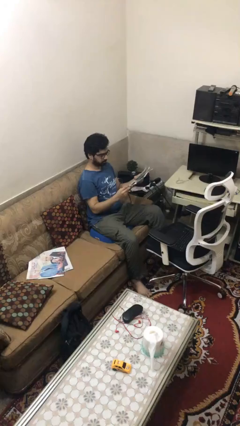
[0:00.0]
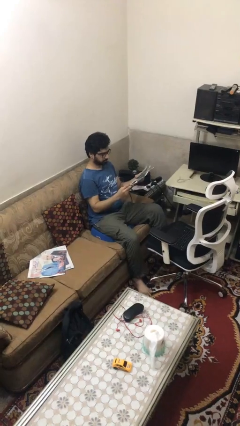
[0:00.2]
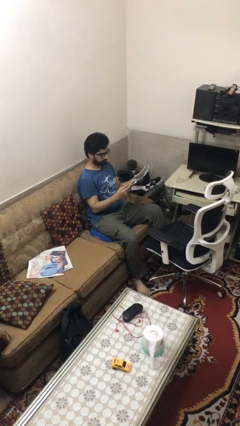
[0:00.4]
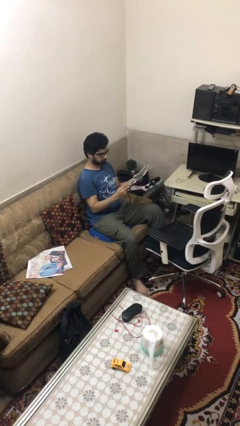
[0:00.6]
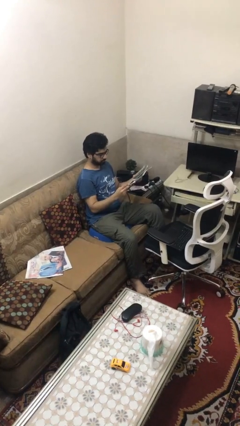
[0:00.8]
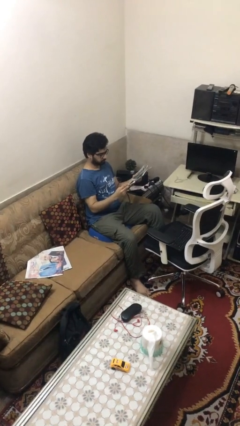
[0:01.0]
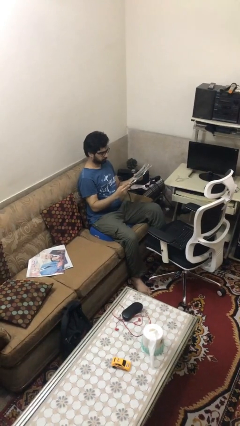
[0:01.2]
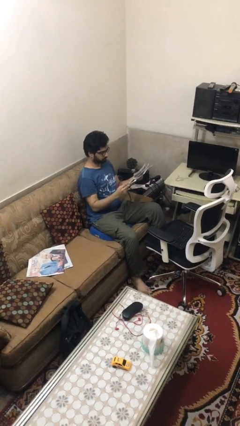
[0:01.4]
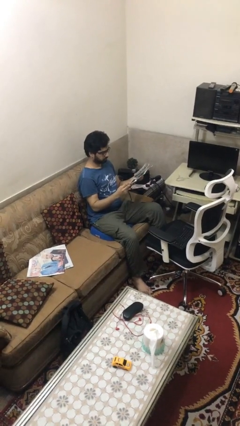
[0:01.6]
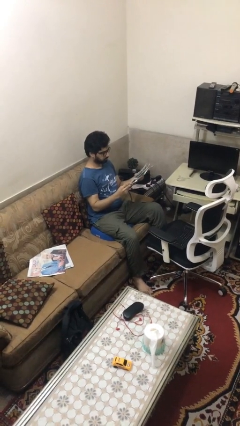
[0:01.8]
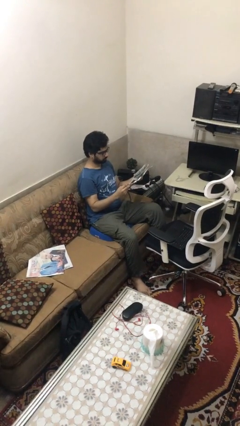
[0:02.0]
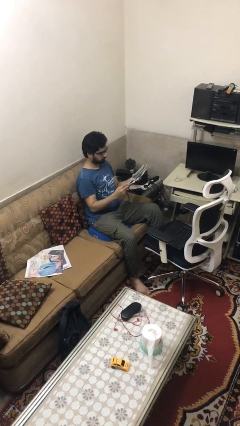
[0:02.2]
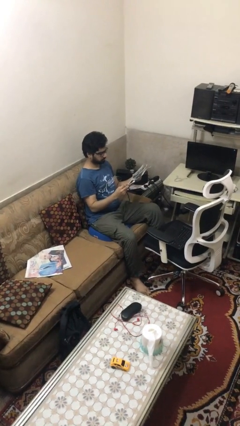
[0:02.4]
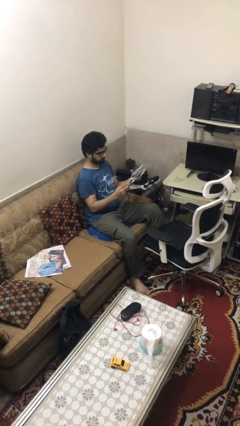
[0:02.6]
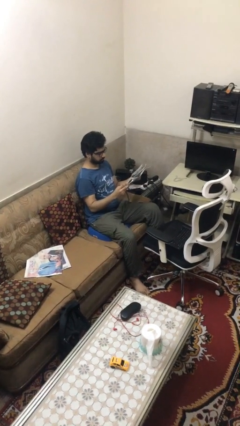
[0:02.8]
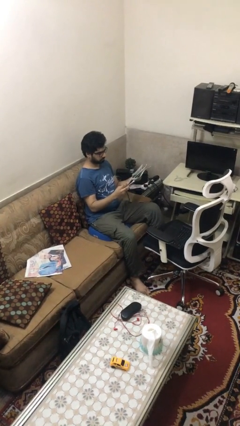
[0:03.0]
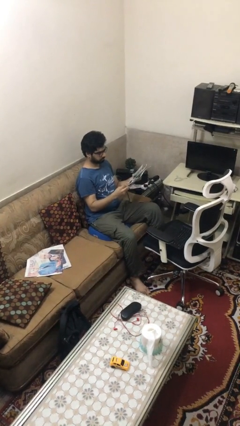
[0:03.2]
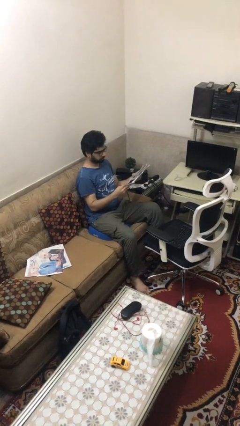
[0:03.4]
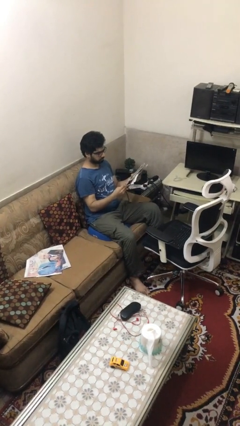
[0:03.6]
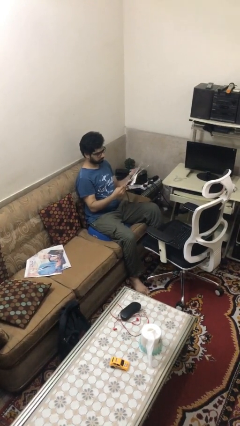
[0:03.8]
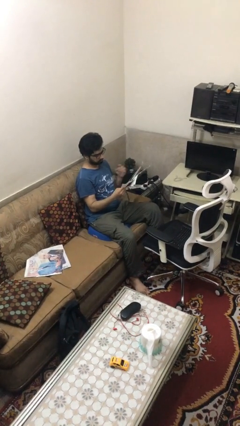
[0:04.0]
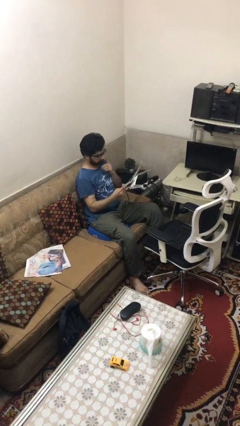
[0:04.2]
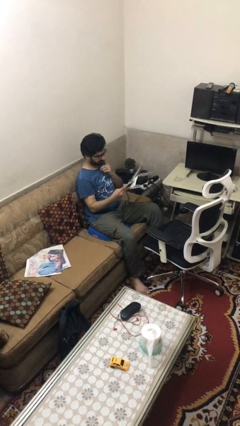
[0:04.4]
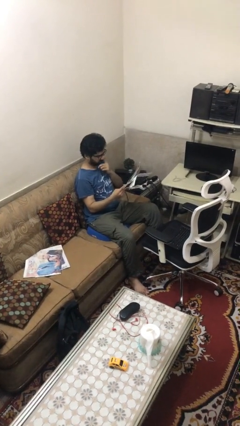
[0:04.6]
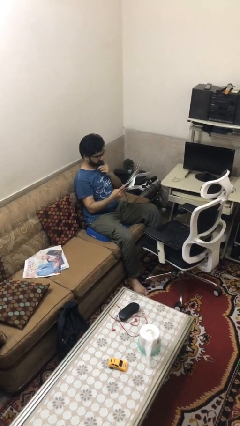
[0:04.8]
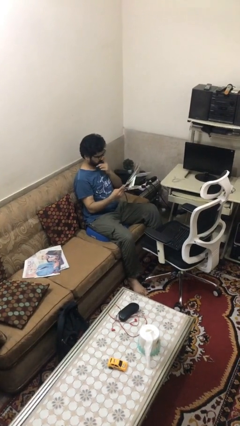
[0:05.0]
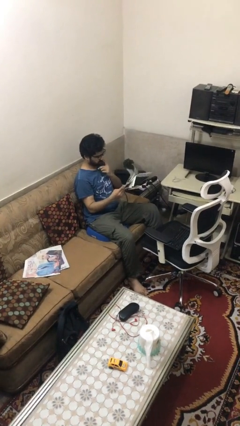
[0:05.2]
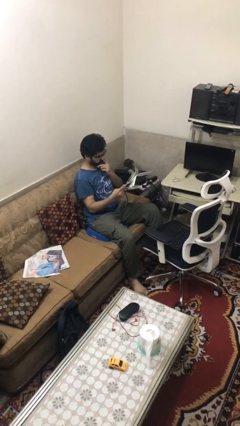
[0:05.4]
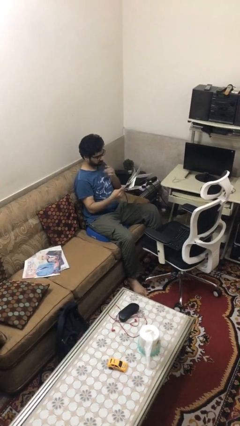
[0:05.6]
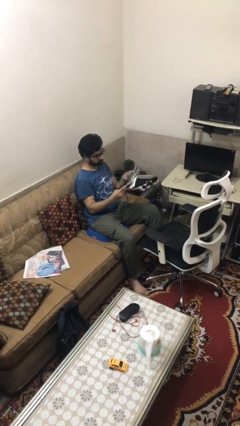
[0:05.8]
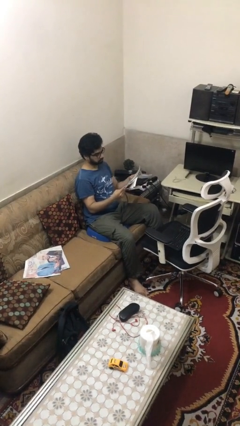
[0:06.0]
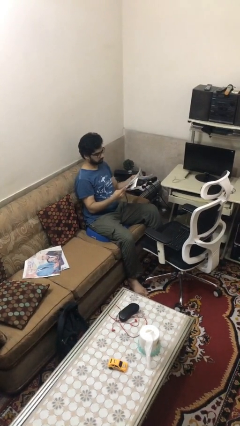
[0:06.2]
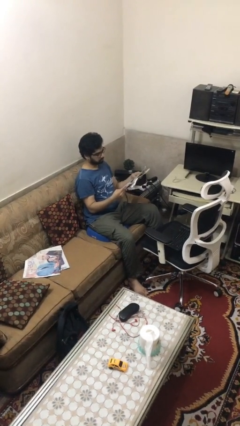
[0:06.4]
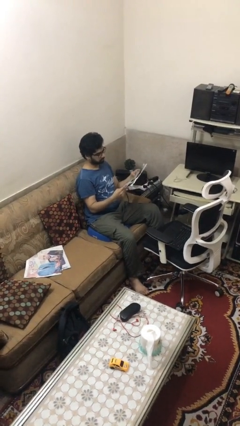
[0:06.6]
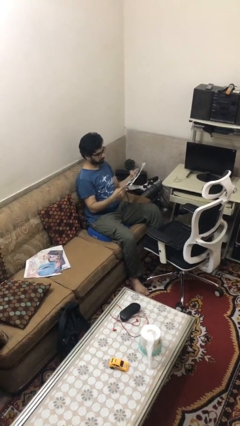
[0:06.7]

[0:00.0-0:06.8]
person reads document

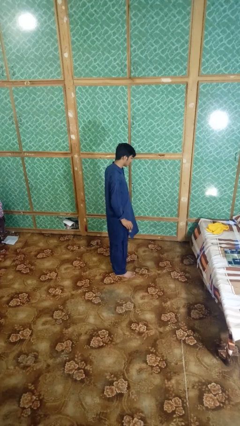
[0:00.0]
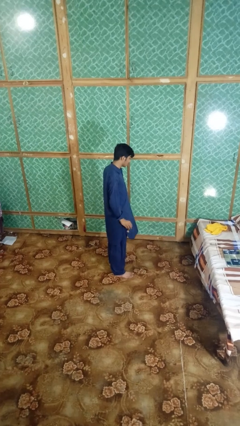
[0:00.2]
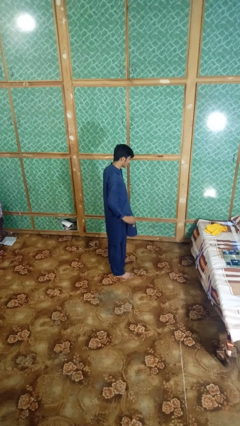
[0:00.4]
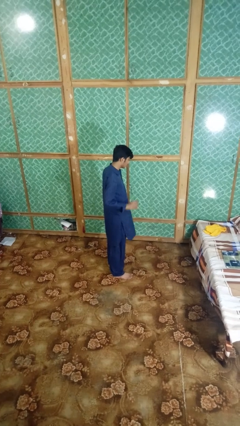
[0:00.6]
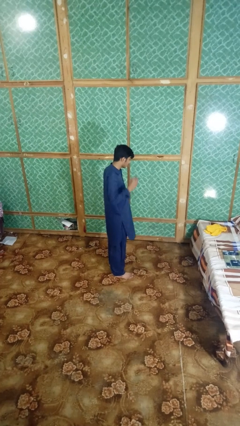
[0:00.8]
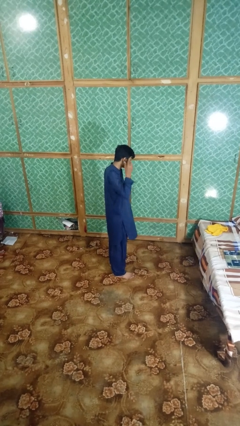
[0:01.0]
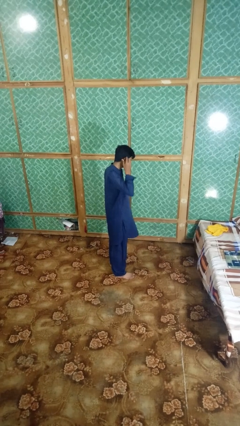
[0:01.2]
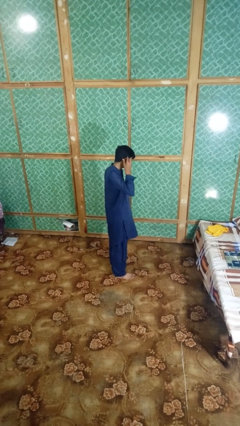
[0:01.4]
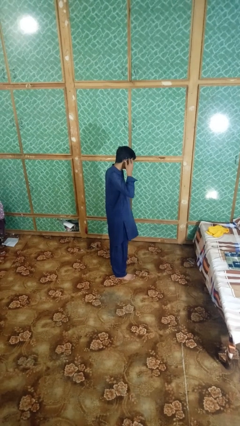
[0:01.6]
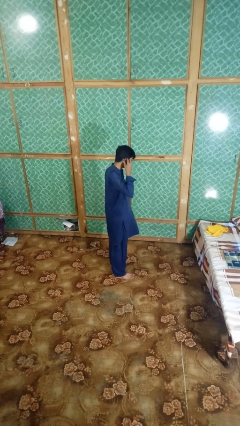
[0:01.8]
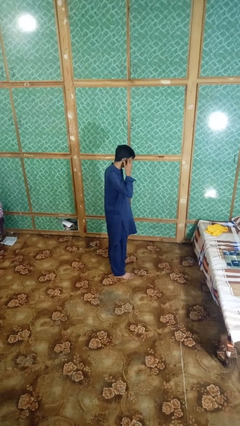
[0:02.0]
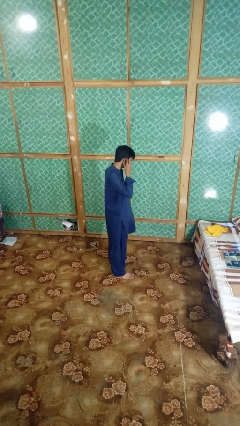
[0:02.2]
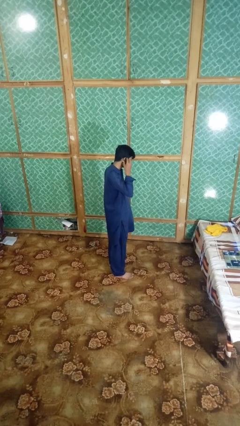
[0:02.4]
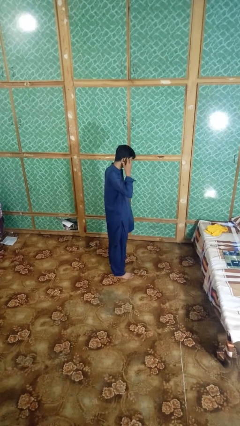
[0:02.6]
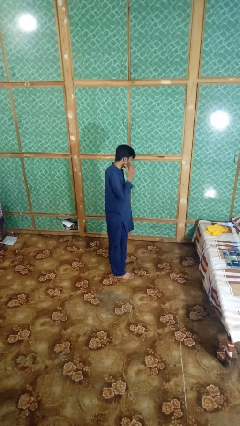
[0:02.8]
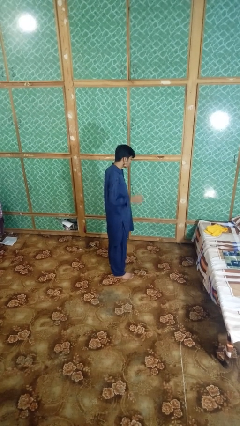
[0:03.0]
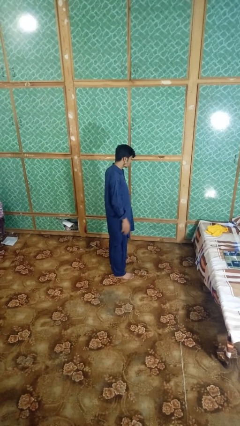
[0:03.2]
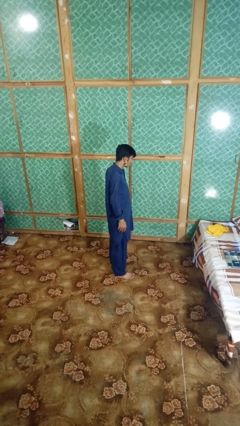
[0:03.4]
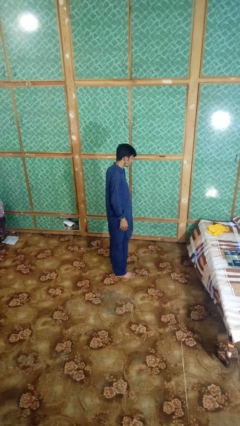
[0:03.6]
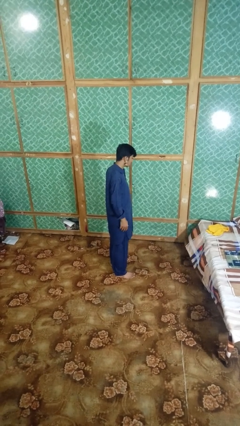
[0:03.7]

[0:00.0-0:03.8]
person puts on earrings

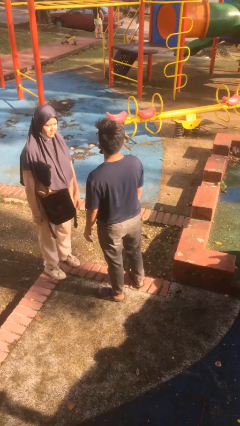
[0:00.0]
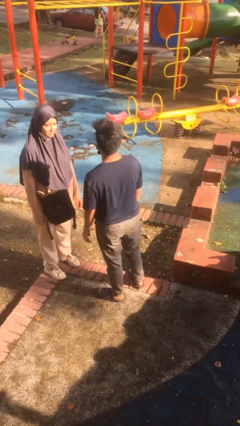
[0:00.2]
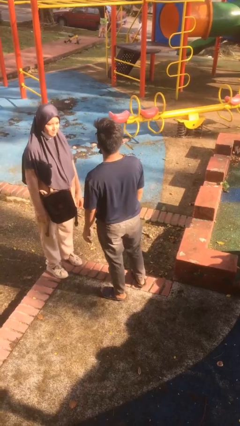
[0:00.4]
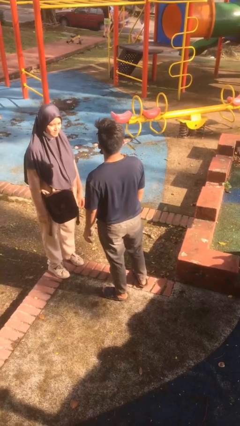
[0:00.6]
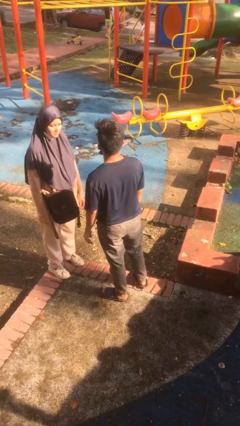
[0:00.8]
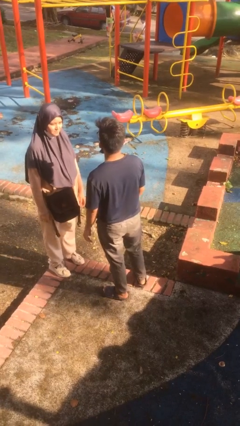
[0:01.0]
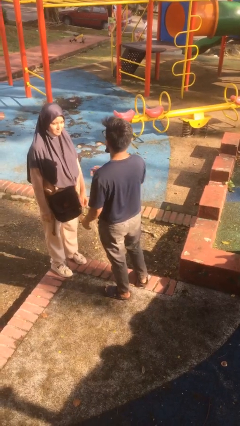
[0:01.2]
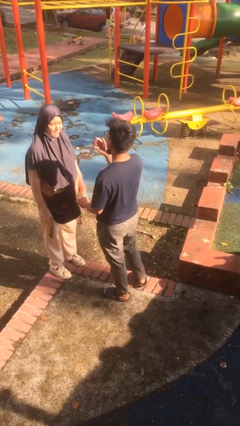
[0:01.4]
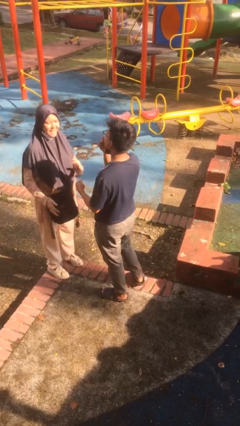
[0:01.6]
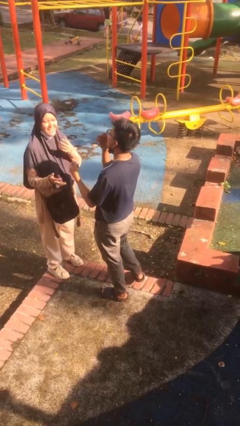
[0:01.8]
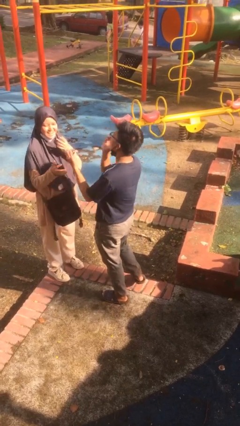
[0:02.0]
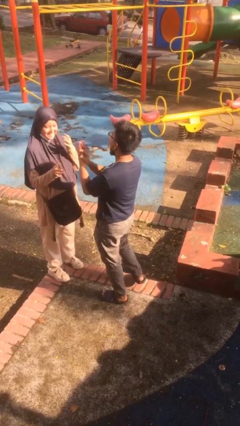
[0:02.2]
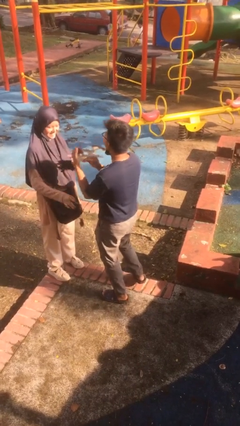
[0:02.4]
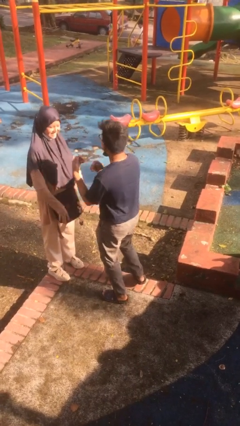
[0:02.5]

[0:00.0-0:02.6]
person laughs with person

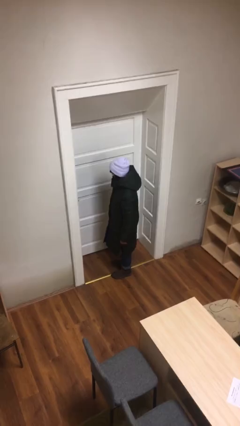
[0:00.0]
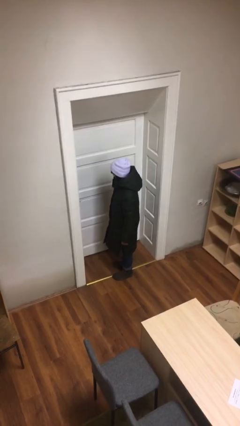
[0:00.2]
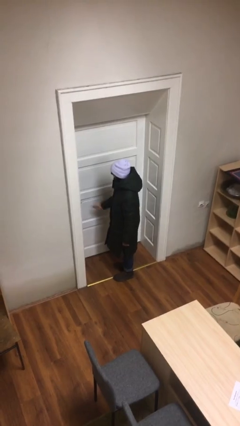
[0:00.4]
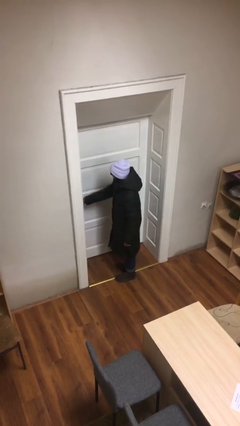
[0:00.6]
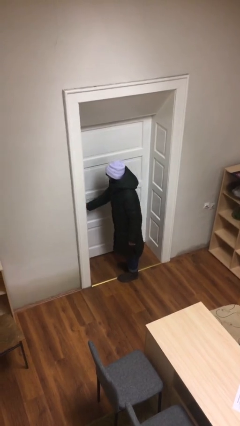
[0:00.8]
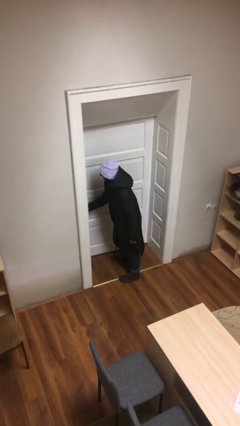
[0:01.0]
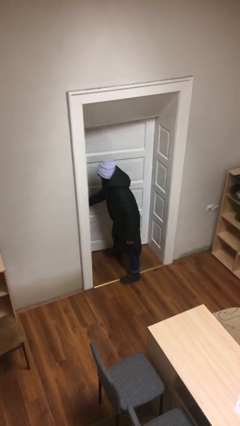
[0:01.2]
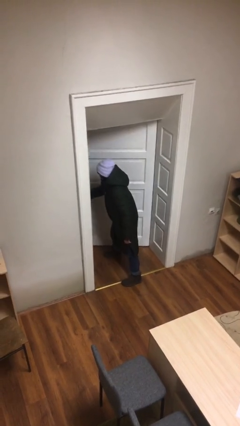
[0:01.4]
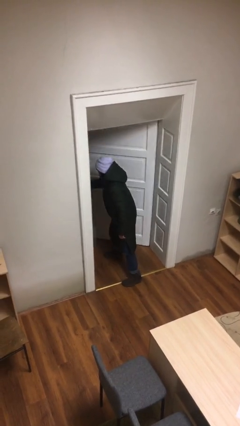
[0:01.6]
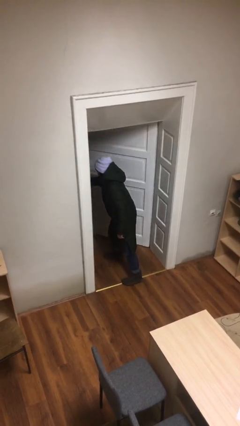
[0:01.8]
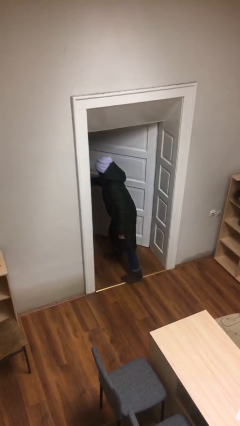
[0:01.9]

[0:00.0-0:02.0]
person opens facility door

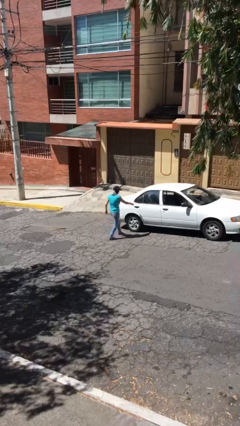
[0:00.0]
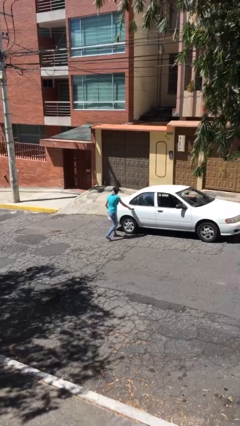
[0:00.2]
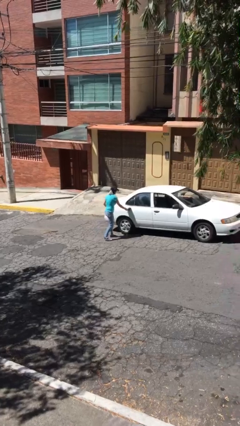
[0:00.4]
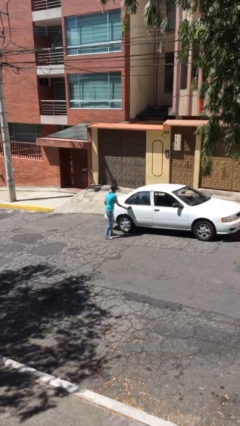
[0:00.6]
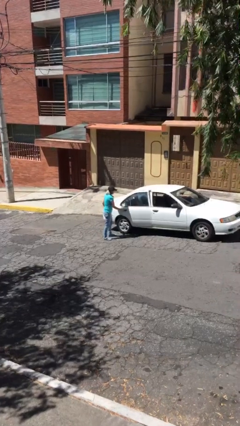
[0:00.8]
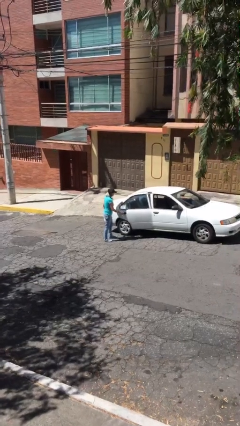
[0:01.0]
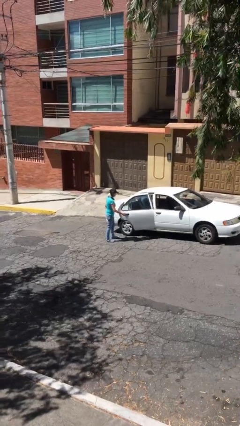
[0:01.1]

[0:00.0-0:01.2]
person opens car door

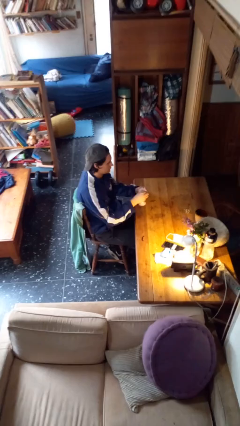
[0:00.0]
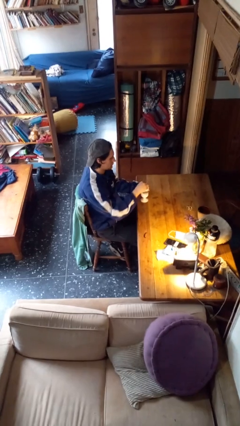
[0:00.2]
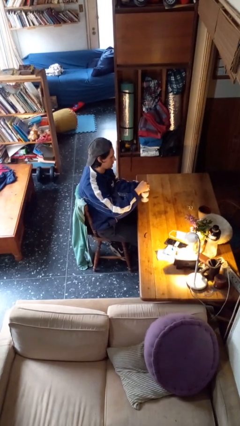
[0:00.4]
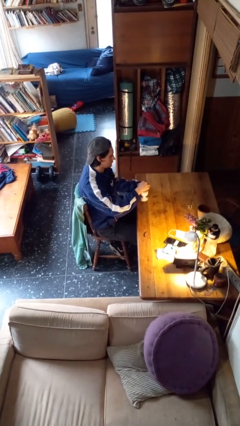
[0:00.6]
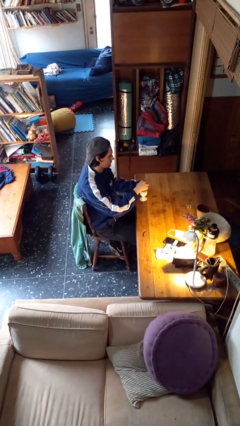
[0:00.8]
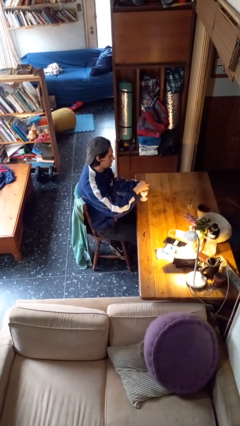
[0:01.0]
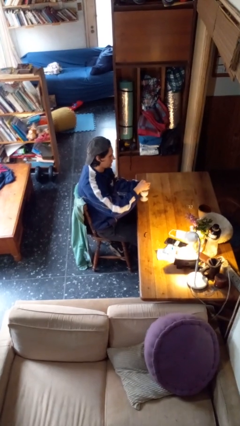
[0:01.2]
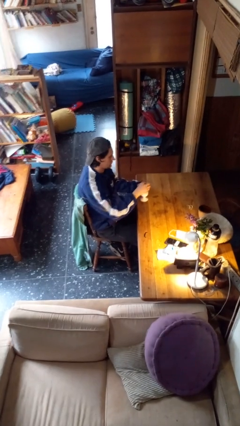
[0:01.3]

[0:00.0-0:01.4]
person stirs mug
